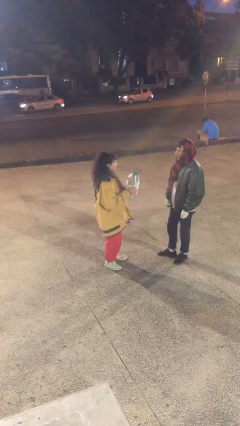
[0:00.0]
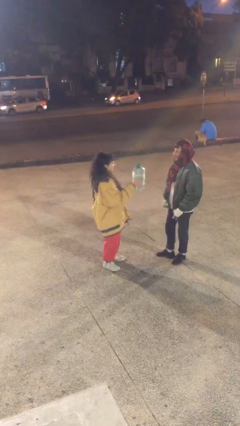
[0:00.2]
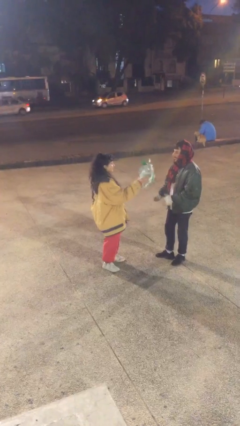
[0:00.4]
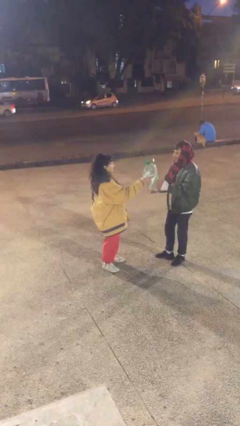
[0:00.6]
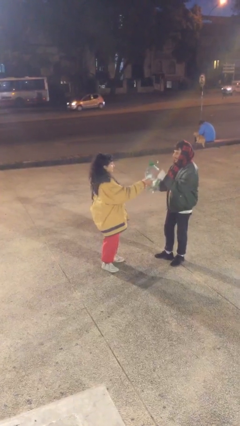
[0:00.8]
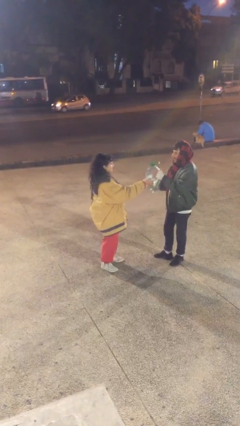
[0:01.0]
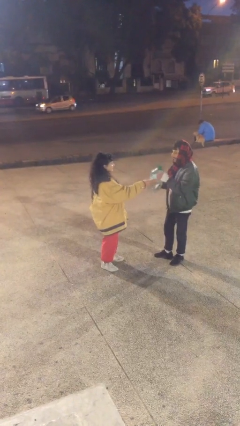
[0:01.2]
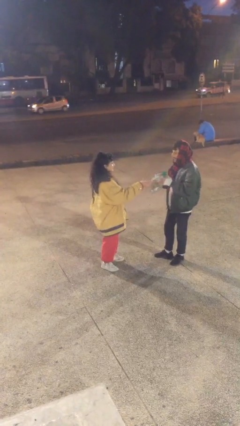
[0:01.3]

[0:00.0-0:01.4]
person transfers object to person

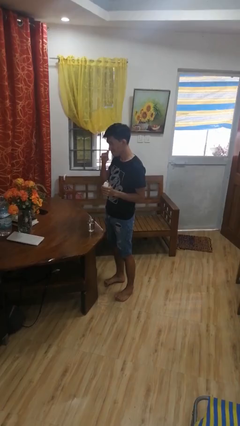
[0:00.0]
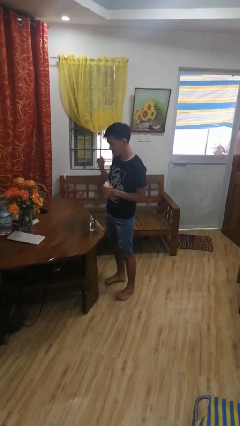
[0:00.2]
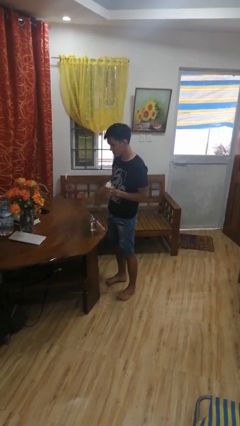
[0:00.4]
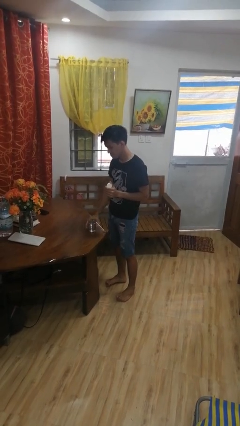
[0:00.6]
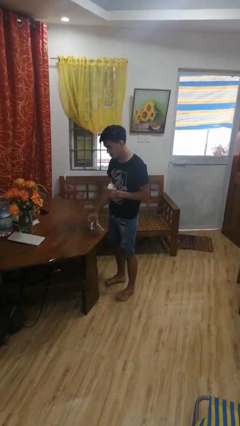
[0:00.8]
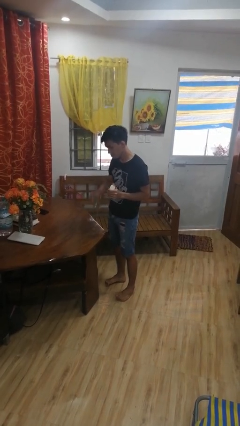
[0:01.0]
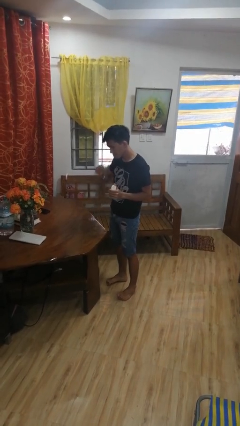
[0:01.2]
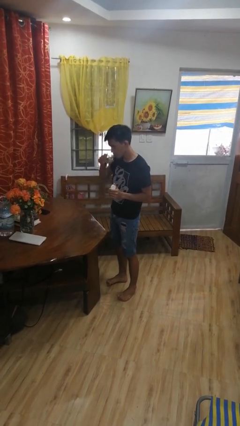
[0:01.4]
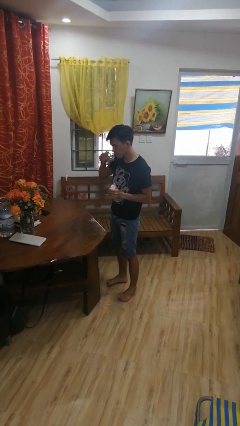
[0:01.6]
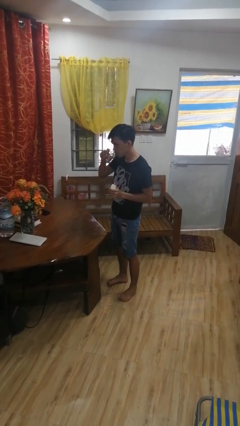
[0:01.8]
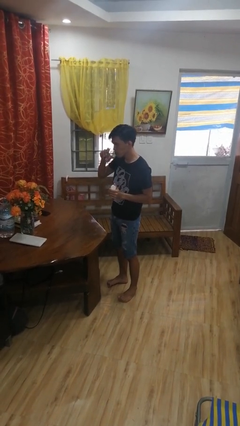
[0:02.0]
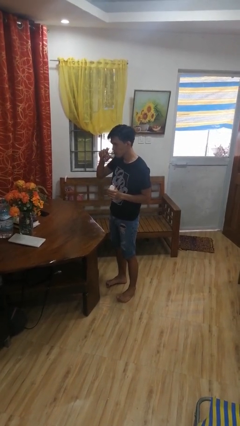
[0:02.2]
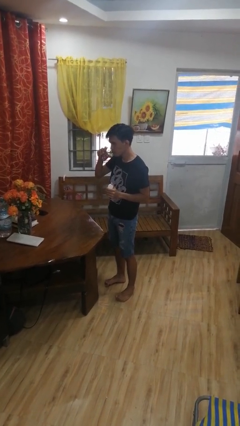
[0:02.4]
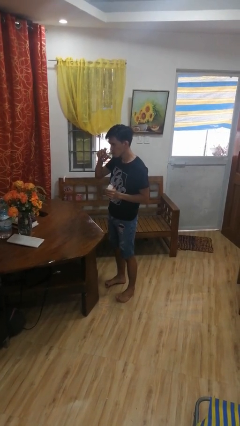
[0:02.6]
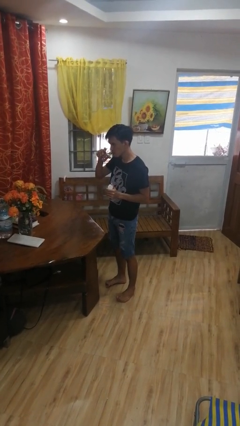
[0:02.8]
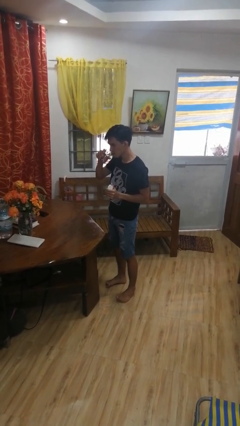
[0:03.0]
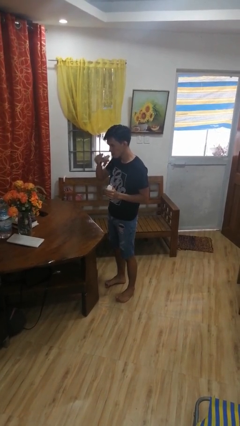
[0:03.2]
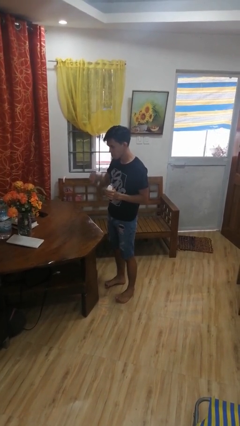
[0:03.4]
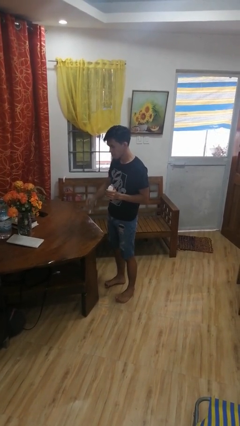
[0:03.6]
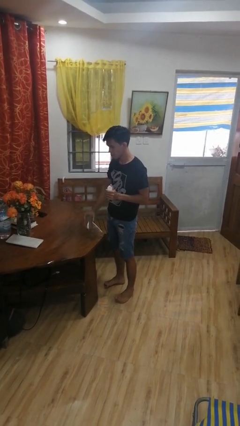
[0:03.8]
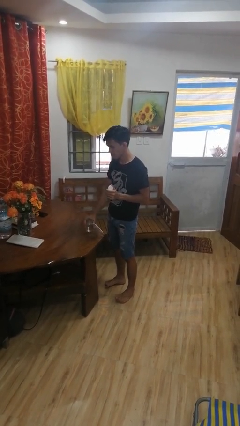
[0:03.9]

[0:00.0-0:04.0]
person drinks from cup

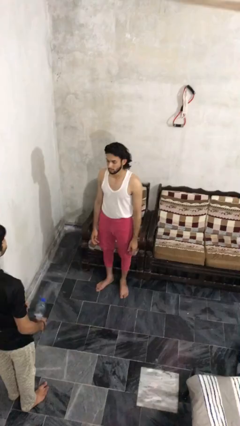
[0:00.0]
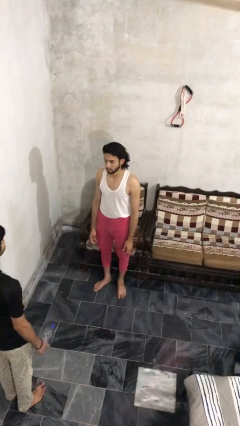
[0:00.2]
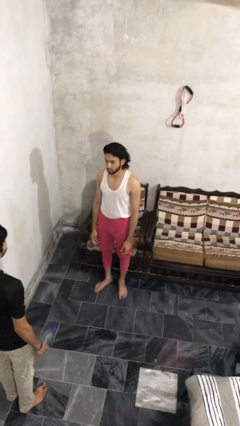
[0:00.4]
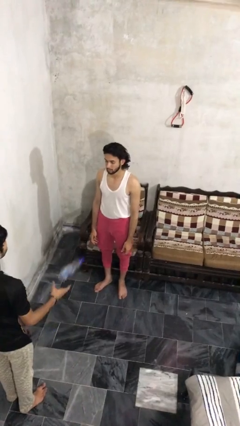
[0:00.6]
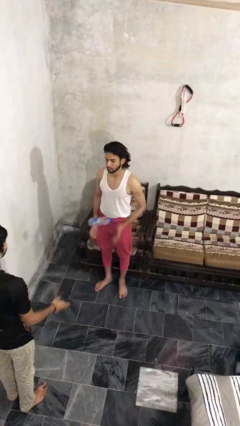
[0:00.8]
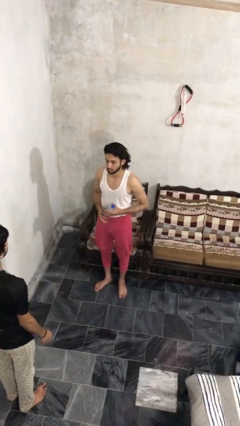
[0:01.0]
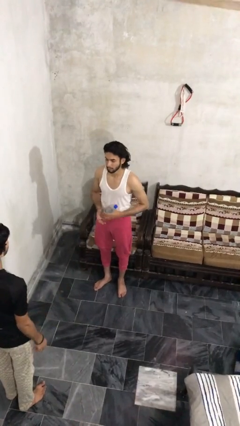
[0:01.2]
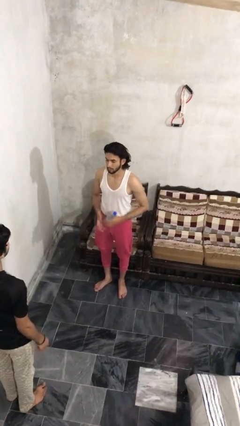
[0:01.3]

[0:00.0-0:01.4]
person catches object from person

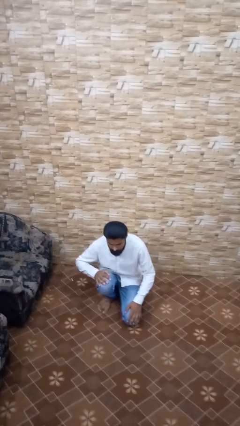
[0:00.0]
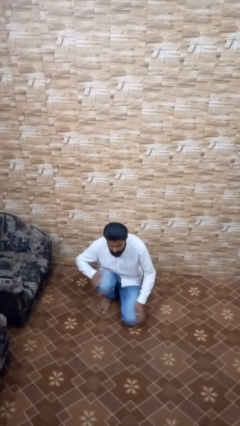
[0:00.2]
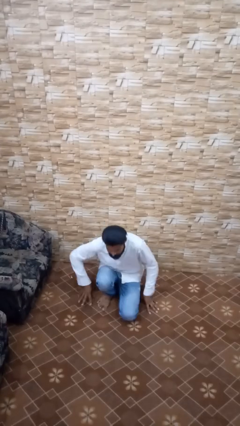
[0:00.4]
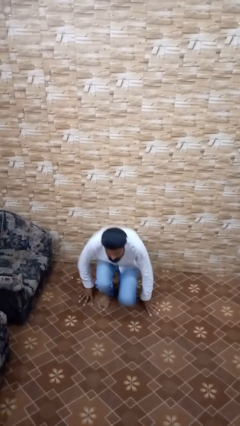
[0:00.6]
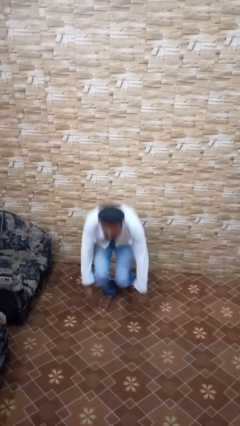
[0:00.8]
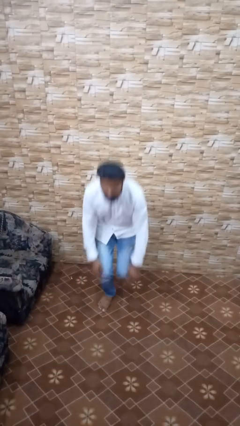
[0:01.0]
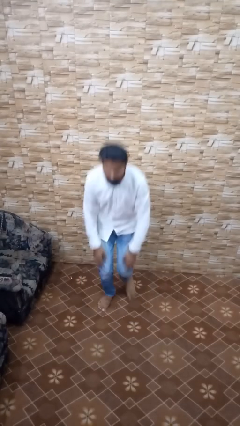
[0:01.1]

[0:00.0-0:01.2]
person stands up from floor

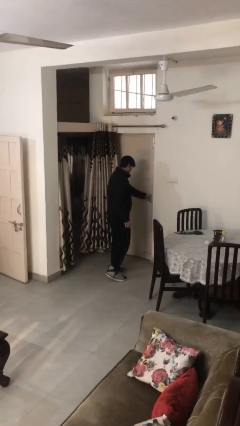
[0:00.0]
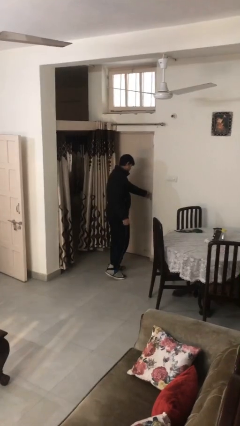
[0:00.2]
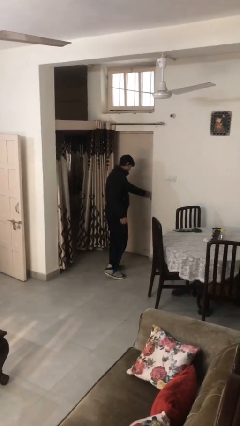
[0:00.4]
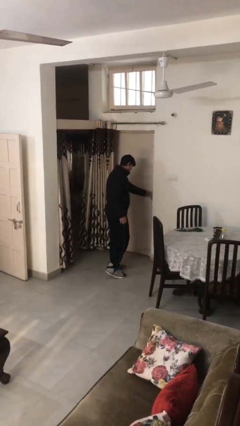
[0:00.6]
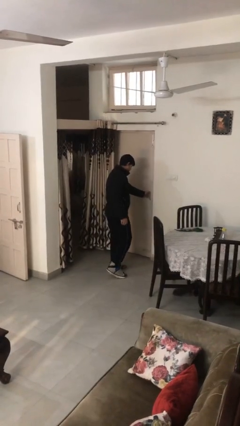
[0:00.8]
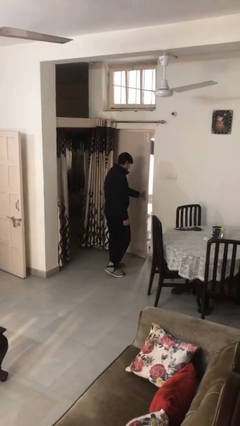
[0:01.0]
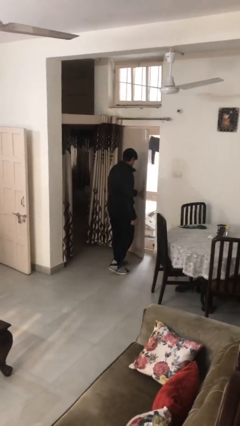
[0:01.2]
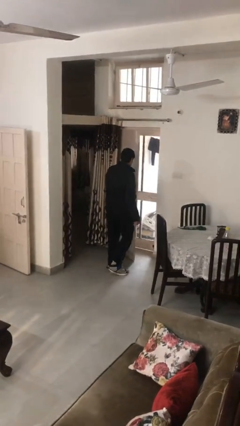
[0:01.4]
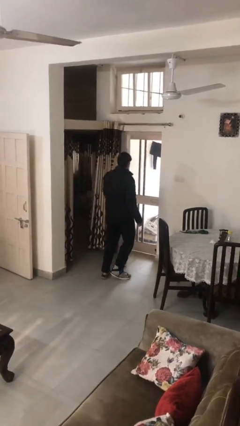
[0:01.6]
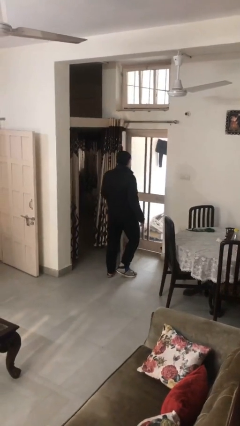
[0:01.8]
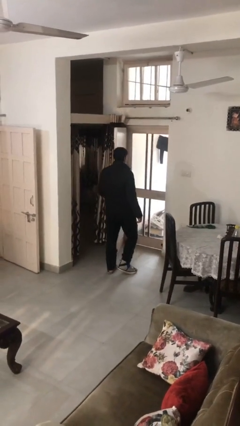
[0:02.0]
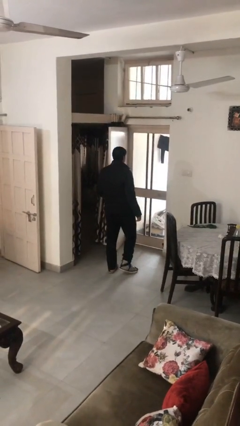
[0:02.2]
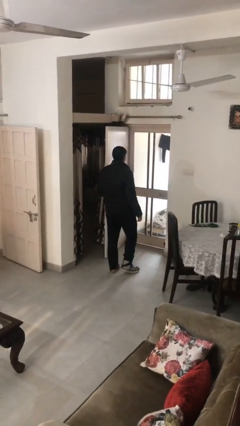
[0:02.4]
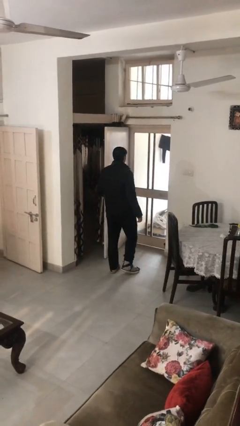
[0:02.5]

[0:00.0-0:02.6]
person opens facility door

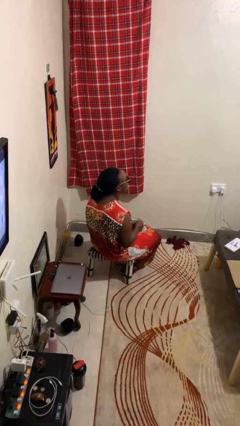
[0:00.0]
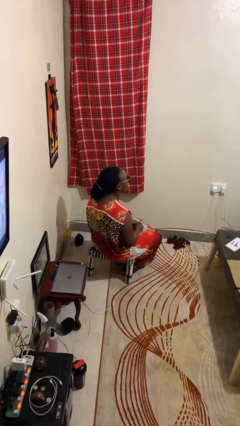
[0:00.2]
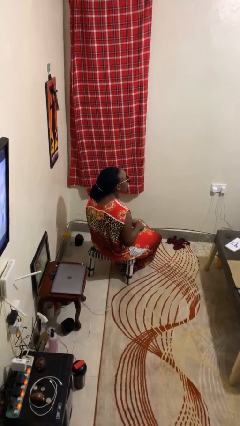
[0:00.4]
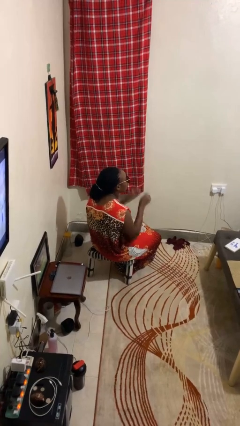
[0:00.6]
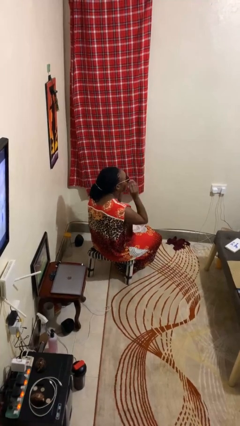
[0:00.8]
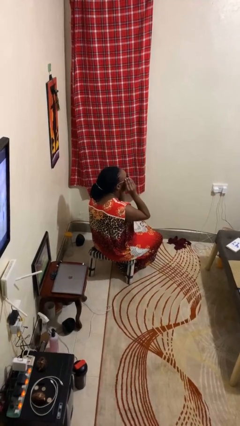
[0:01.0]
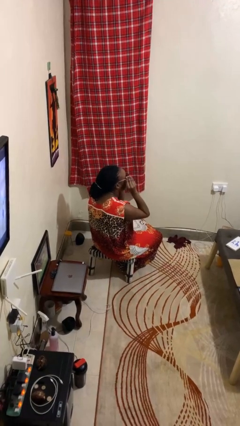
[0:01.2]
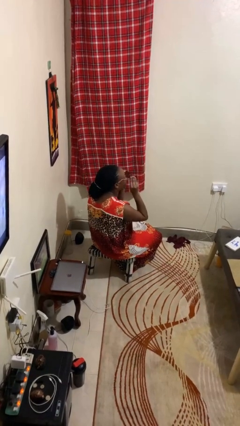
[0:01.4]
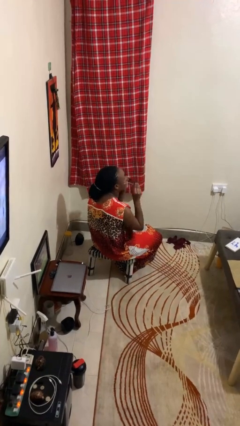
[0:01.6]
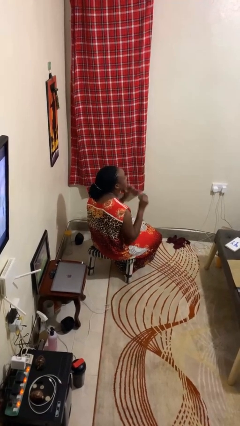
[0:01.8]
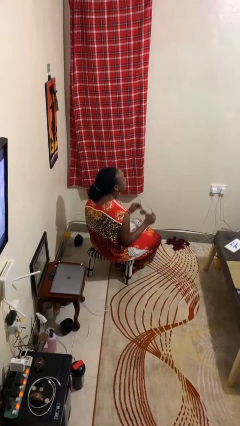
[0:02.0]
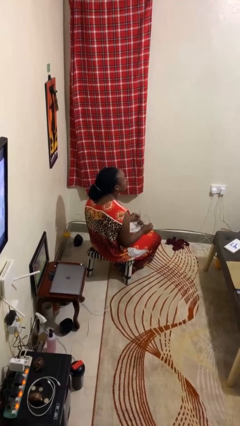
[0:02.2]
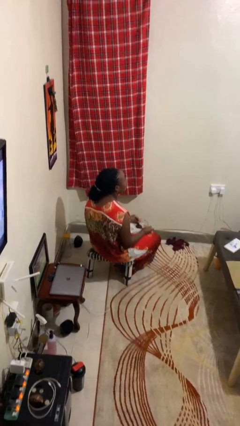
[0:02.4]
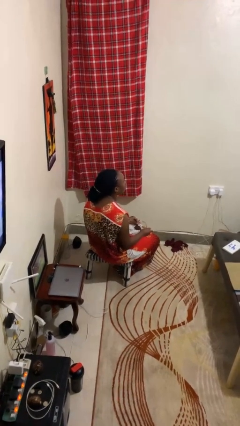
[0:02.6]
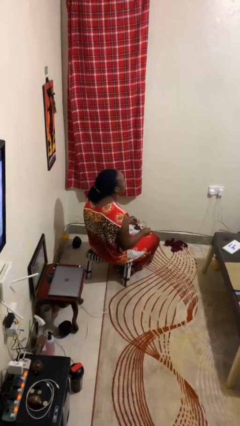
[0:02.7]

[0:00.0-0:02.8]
person takes off sunglasses

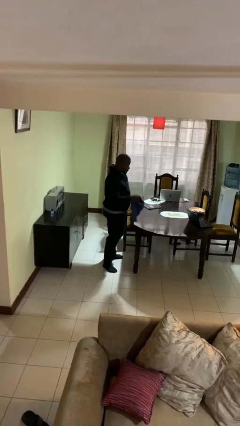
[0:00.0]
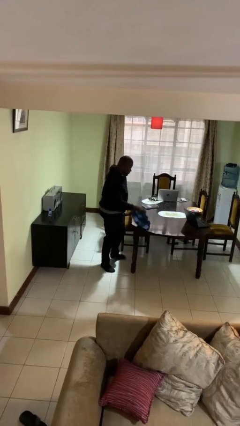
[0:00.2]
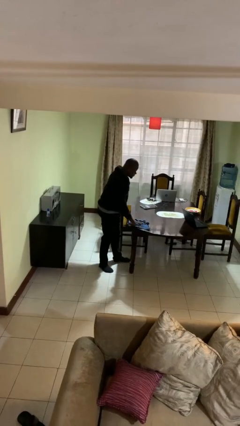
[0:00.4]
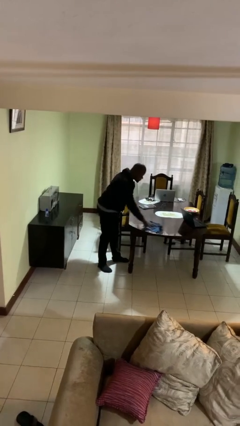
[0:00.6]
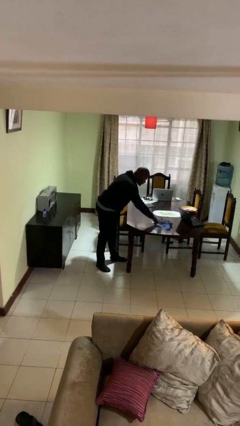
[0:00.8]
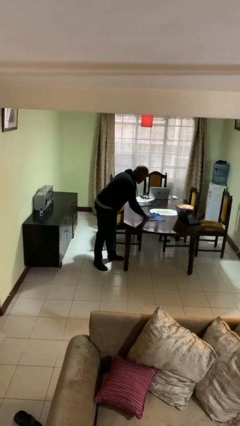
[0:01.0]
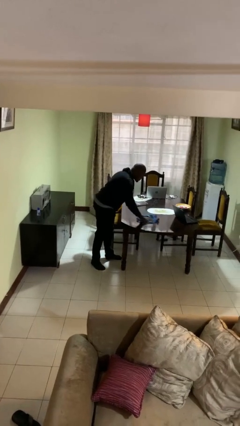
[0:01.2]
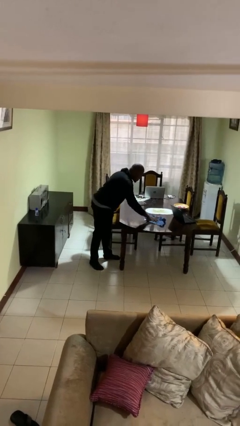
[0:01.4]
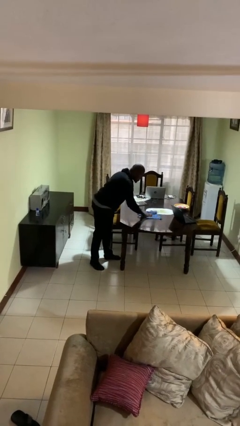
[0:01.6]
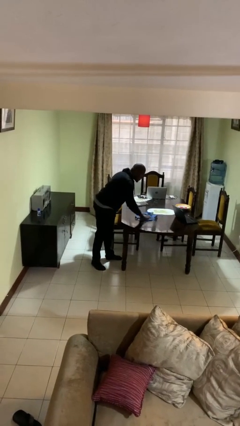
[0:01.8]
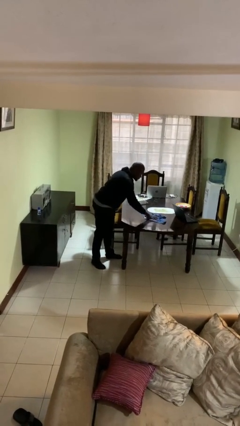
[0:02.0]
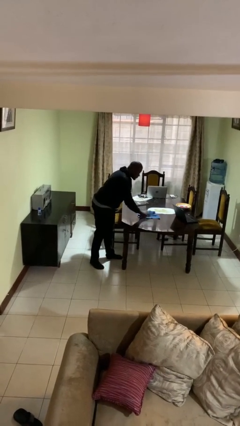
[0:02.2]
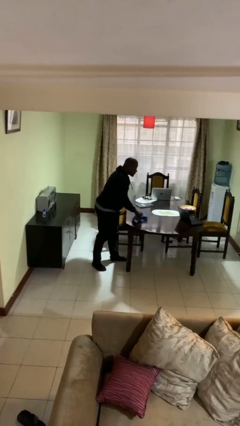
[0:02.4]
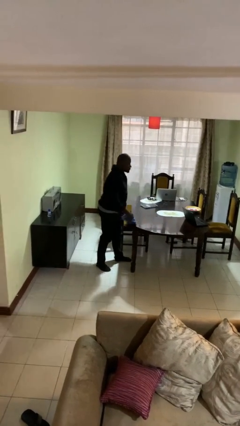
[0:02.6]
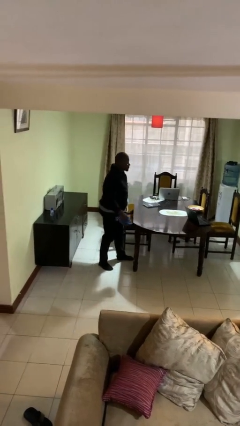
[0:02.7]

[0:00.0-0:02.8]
person cleans table with rag

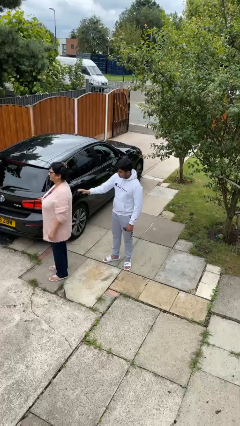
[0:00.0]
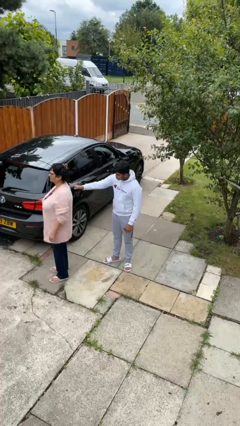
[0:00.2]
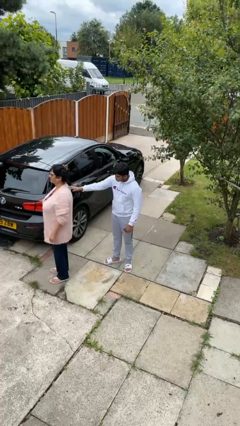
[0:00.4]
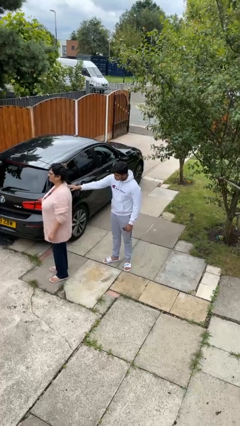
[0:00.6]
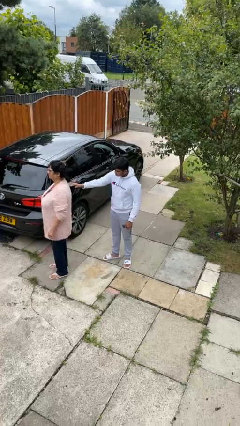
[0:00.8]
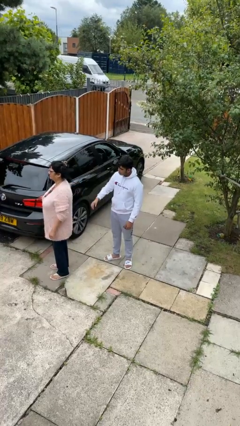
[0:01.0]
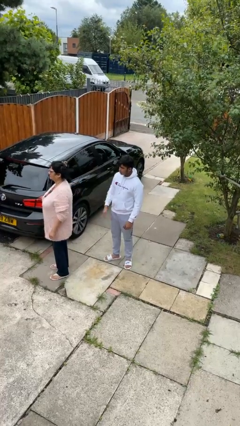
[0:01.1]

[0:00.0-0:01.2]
person touches back of person
